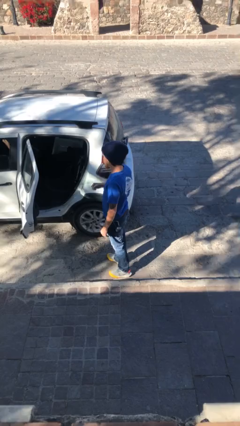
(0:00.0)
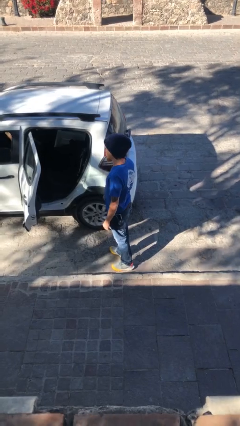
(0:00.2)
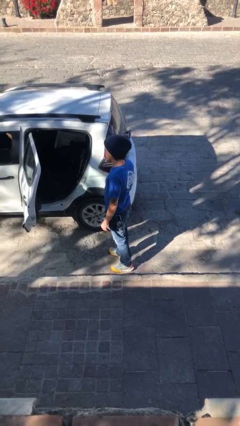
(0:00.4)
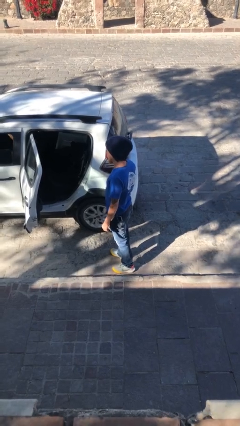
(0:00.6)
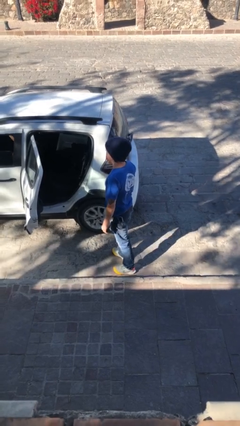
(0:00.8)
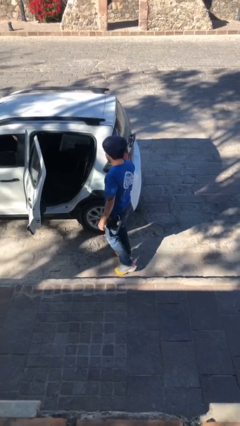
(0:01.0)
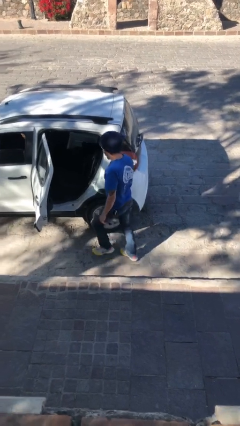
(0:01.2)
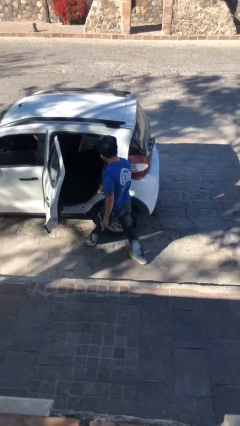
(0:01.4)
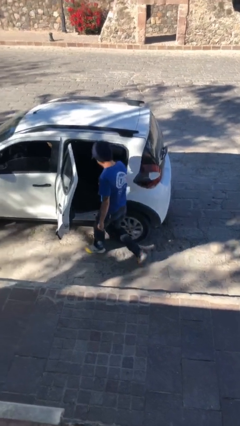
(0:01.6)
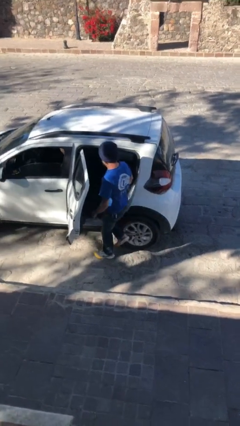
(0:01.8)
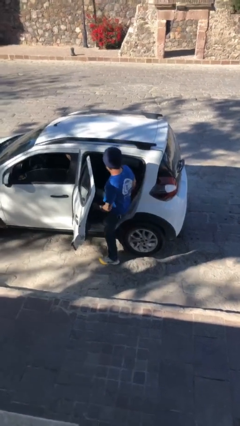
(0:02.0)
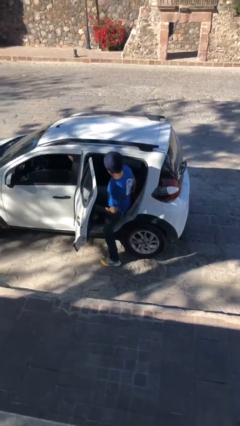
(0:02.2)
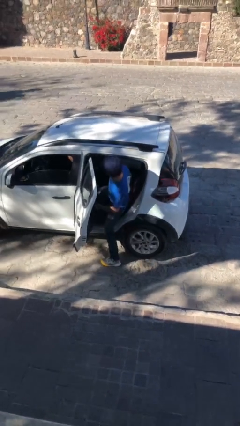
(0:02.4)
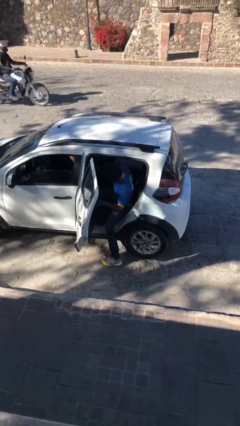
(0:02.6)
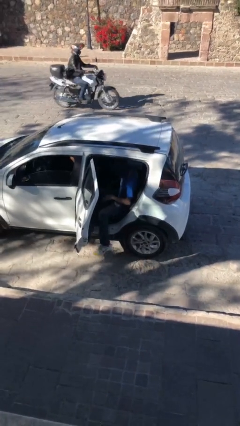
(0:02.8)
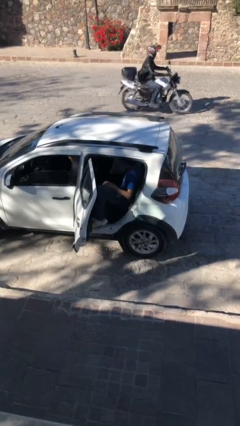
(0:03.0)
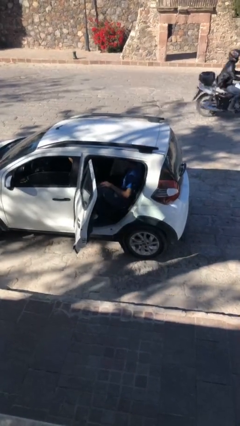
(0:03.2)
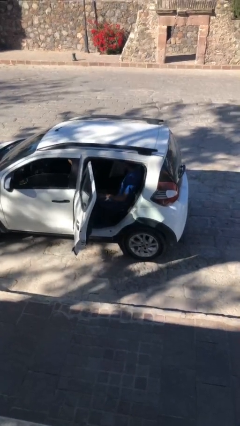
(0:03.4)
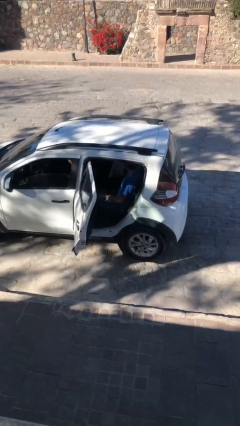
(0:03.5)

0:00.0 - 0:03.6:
person enters car

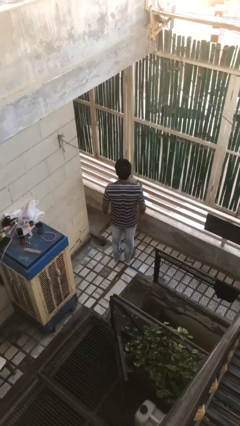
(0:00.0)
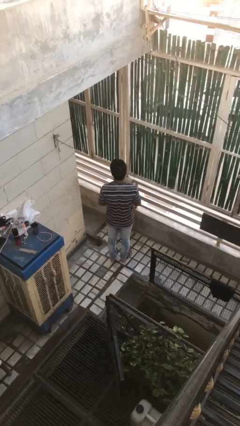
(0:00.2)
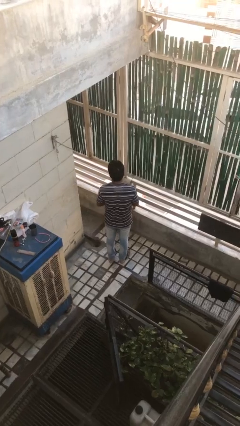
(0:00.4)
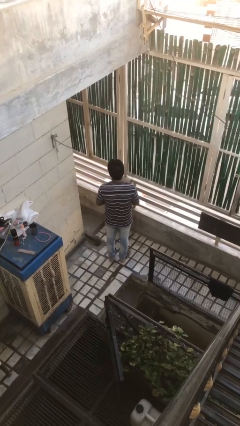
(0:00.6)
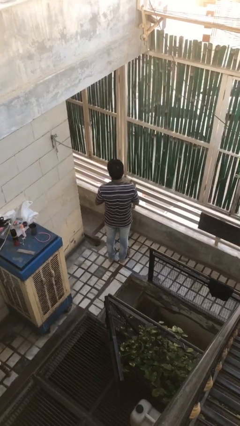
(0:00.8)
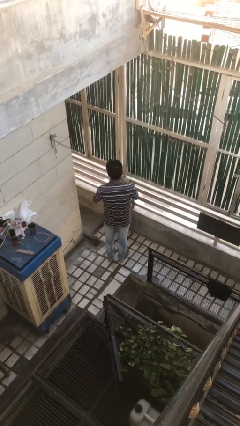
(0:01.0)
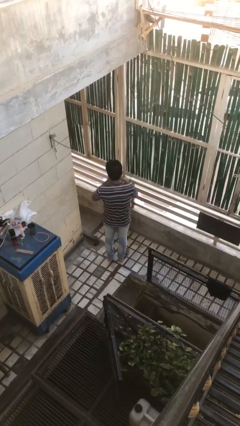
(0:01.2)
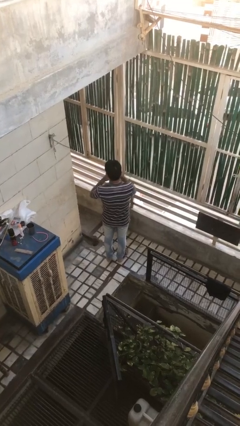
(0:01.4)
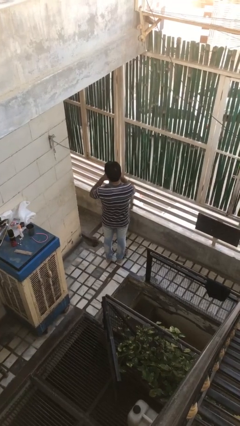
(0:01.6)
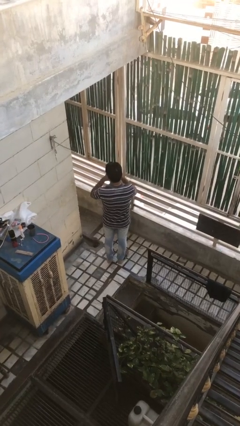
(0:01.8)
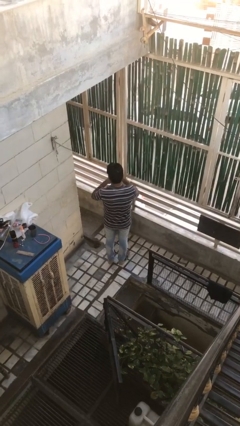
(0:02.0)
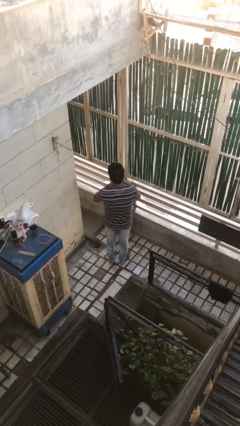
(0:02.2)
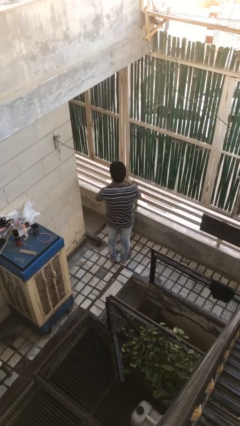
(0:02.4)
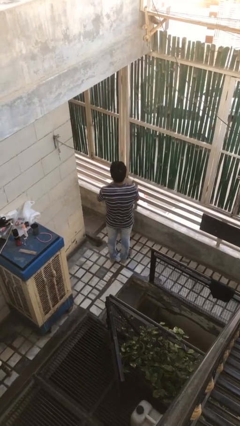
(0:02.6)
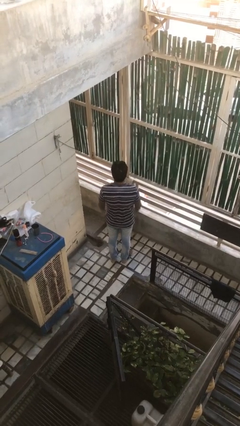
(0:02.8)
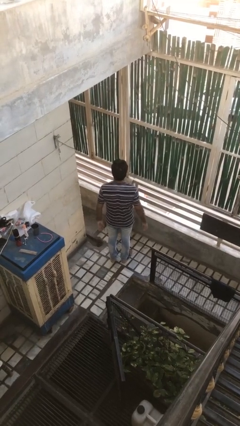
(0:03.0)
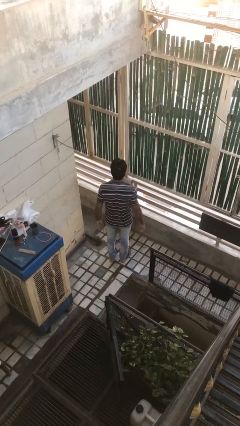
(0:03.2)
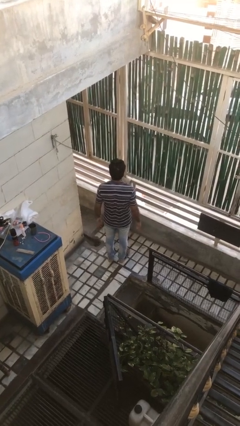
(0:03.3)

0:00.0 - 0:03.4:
person puts on ring

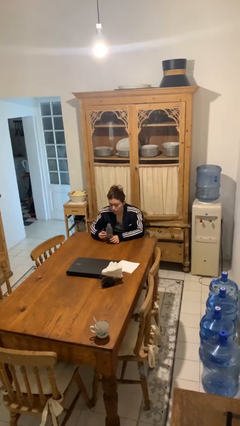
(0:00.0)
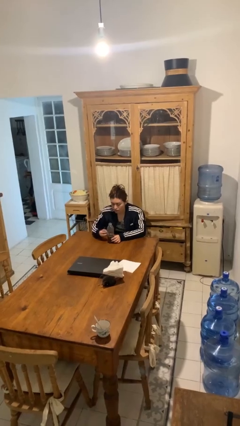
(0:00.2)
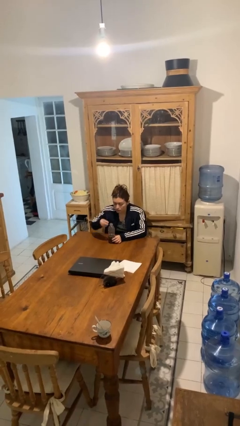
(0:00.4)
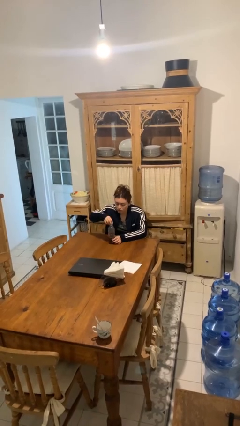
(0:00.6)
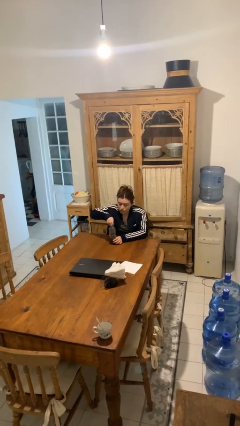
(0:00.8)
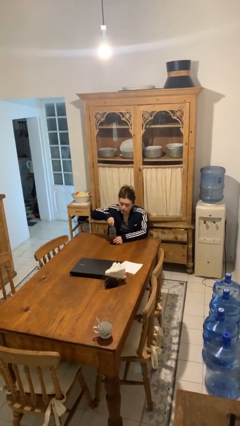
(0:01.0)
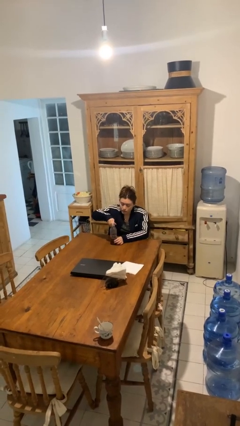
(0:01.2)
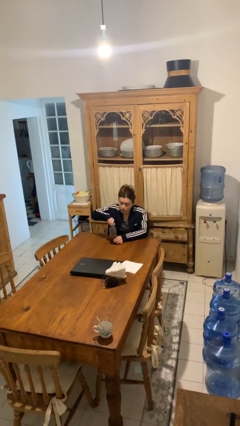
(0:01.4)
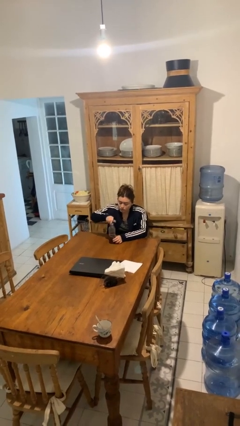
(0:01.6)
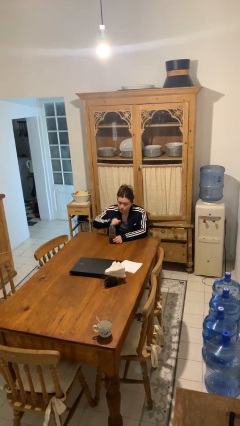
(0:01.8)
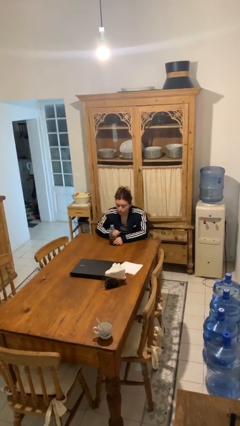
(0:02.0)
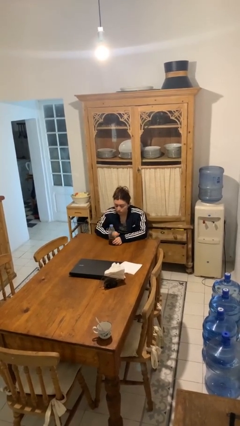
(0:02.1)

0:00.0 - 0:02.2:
person screws lid to bottle

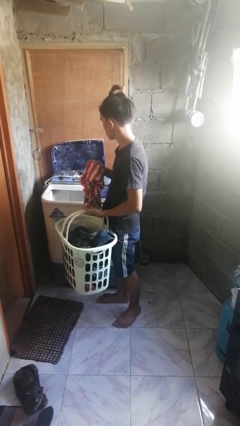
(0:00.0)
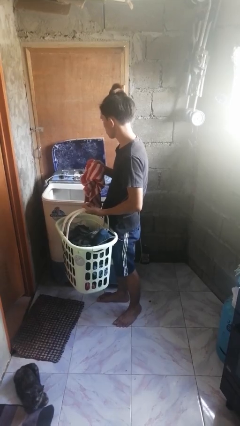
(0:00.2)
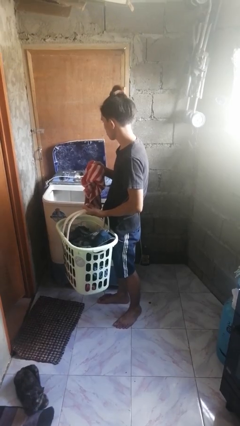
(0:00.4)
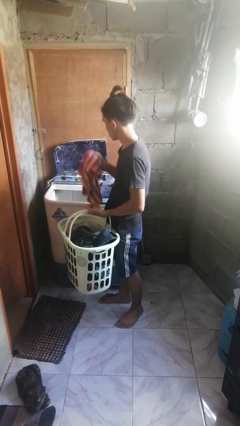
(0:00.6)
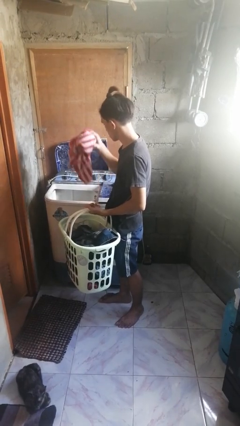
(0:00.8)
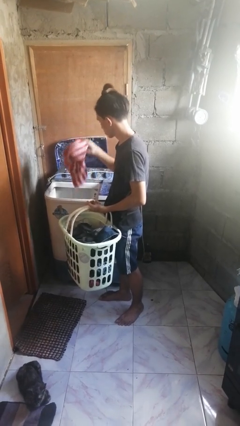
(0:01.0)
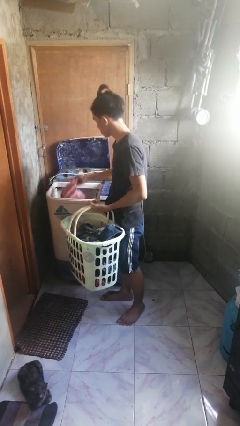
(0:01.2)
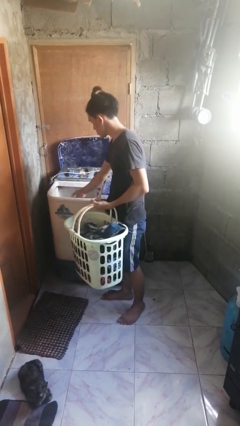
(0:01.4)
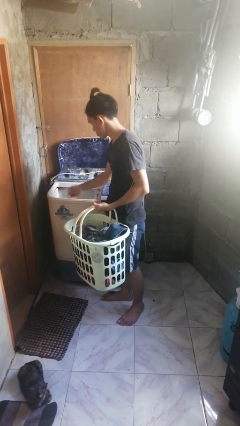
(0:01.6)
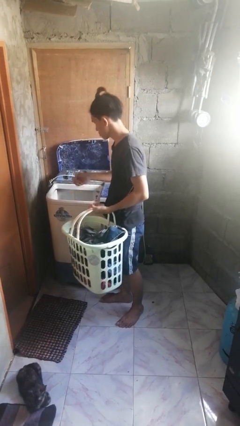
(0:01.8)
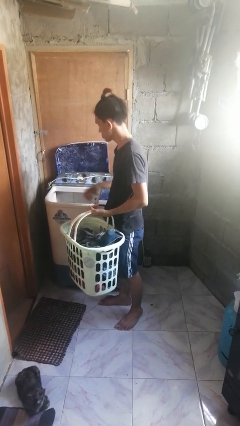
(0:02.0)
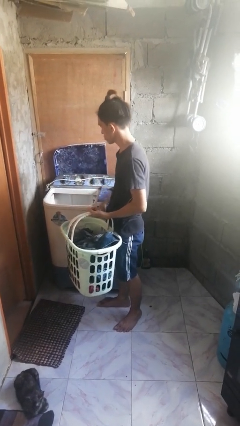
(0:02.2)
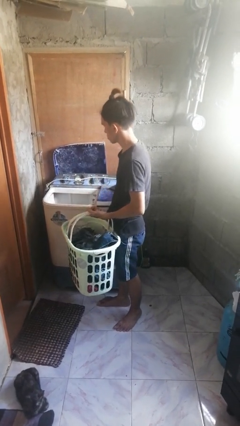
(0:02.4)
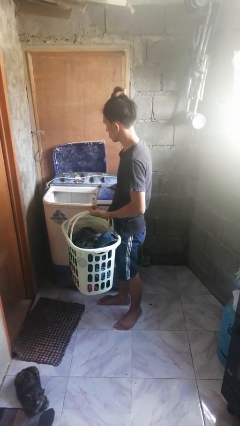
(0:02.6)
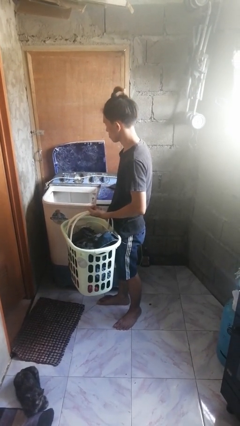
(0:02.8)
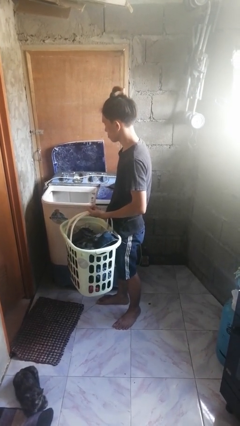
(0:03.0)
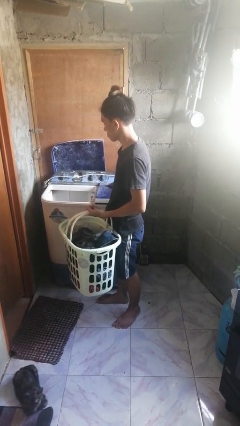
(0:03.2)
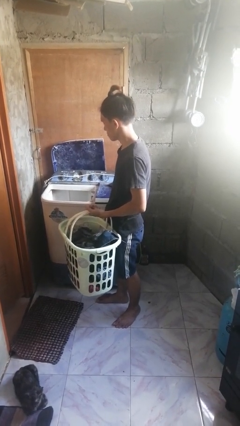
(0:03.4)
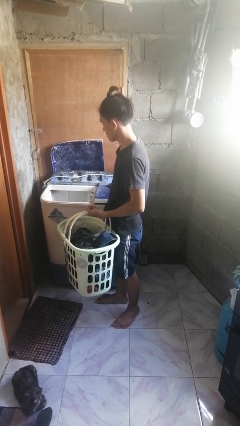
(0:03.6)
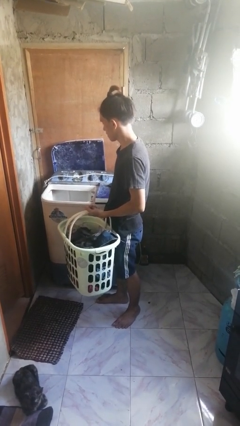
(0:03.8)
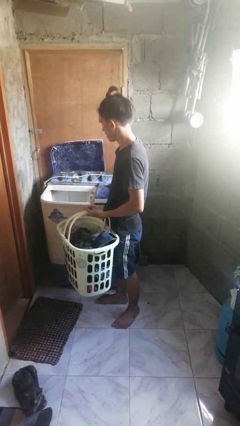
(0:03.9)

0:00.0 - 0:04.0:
person loads clotheswasher

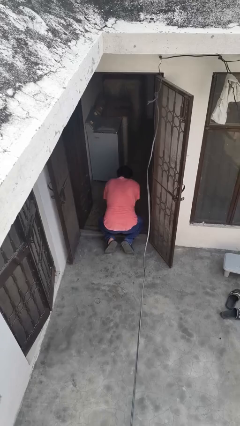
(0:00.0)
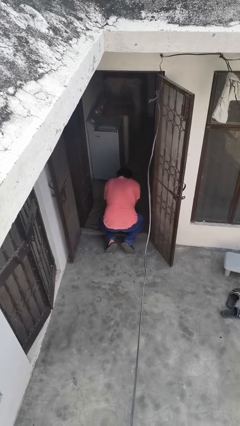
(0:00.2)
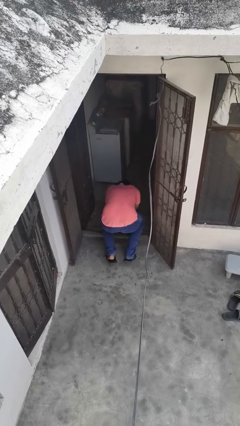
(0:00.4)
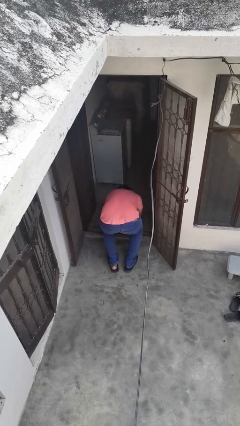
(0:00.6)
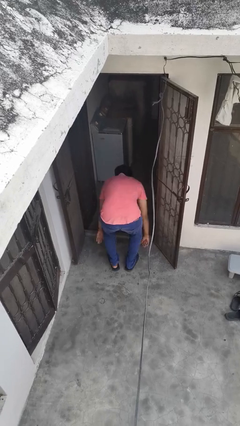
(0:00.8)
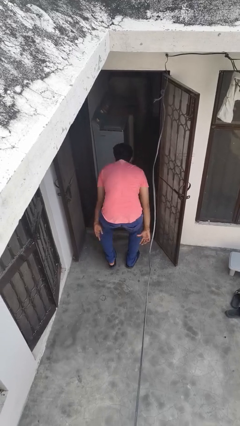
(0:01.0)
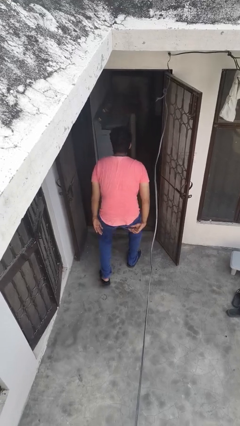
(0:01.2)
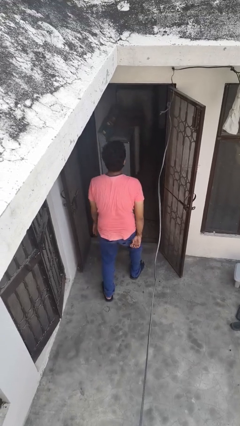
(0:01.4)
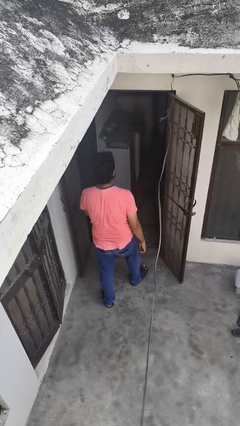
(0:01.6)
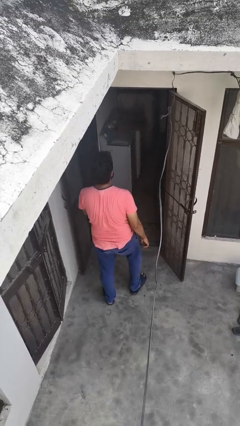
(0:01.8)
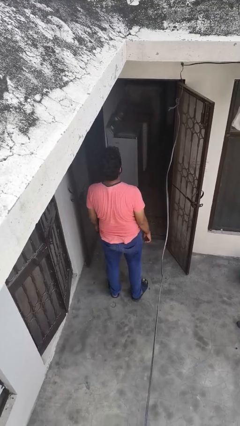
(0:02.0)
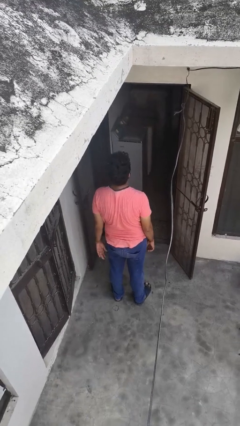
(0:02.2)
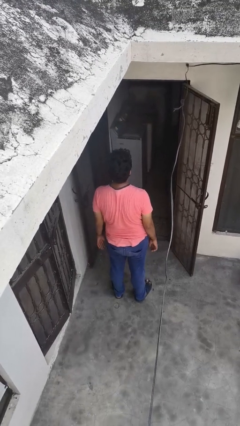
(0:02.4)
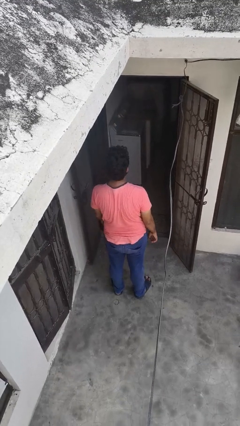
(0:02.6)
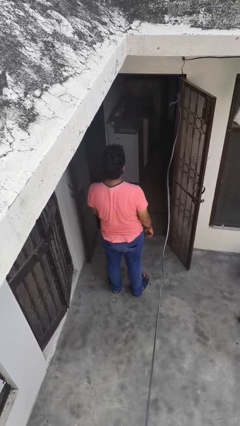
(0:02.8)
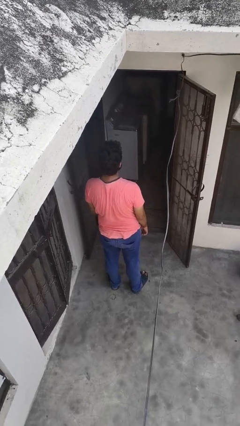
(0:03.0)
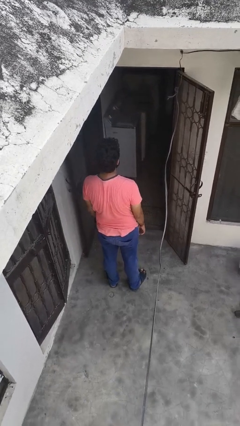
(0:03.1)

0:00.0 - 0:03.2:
person stands up from floor

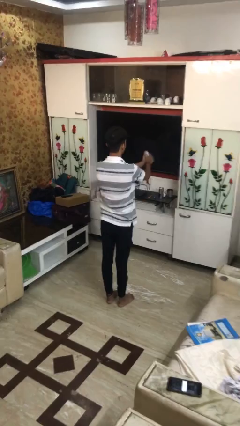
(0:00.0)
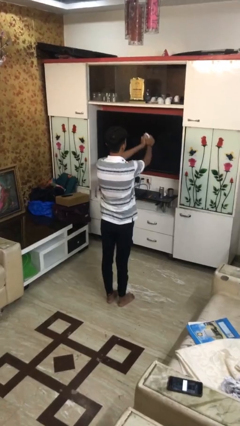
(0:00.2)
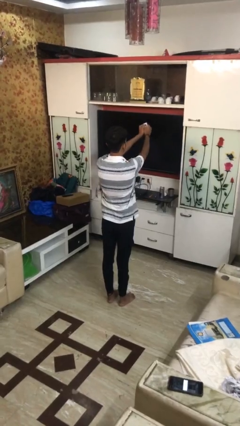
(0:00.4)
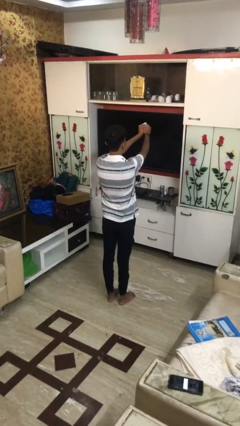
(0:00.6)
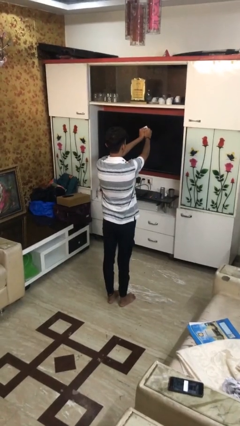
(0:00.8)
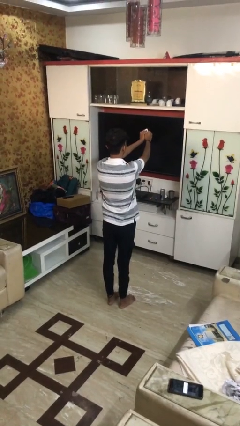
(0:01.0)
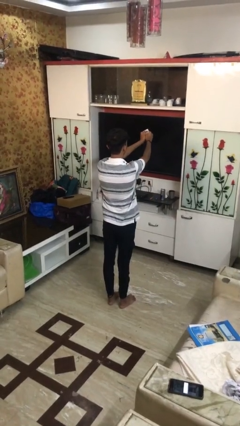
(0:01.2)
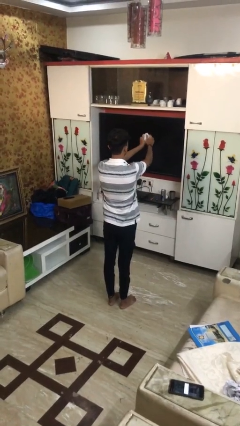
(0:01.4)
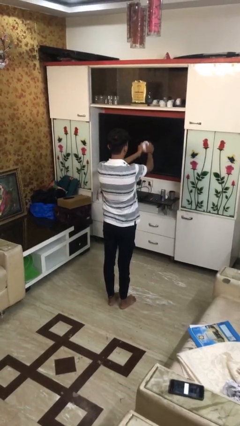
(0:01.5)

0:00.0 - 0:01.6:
person crumples paper
